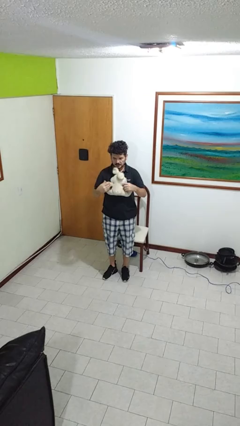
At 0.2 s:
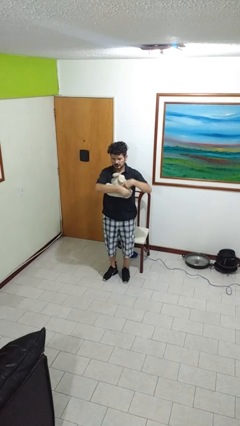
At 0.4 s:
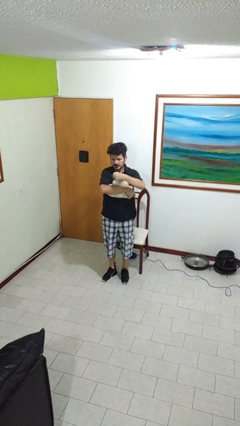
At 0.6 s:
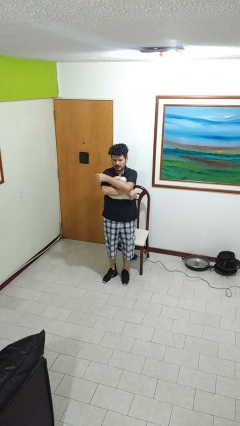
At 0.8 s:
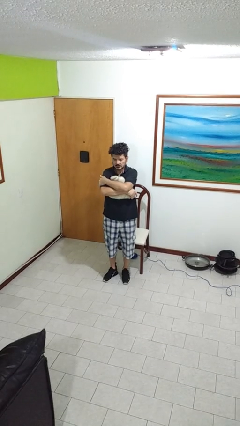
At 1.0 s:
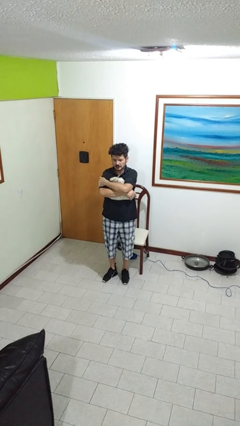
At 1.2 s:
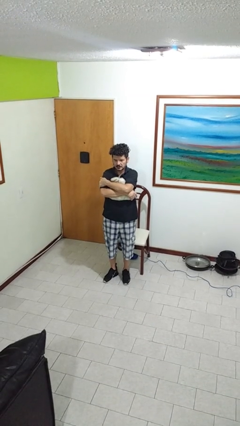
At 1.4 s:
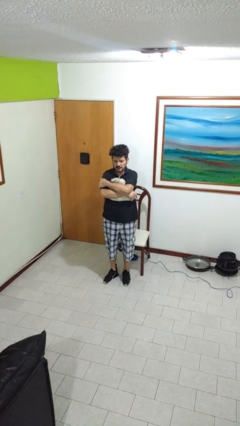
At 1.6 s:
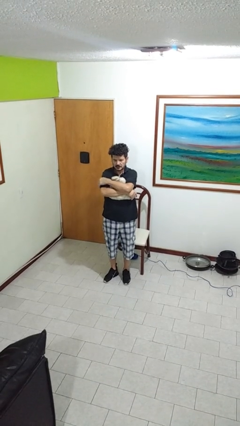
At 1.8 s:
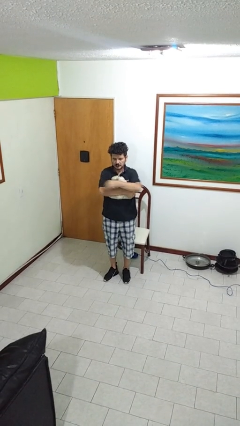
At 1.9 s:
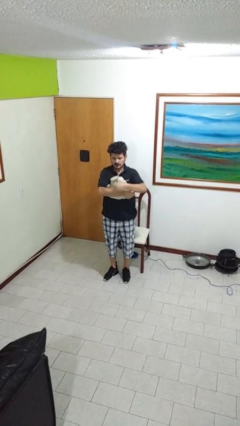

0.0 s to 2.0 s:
person hugs stuffed animal

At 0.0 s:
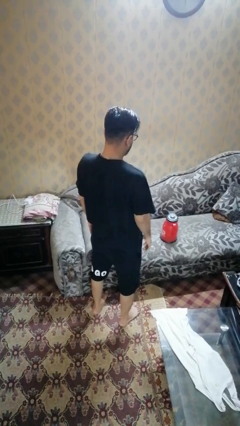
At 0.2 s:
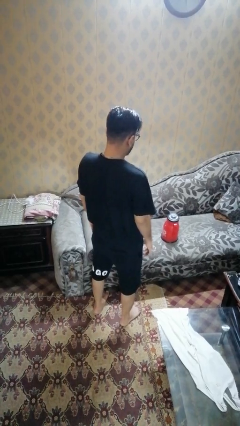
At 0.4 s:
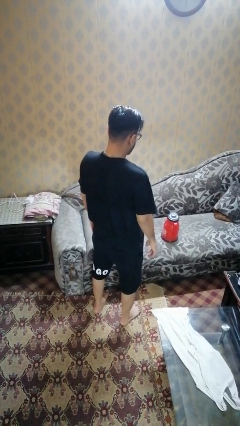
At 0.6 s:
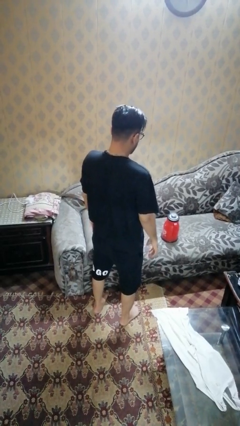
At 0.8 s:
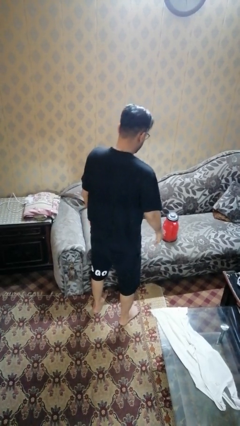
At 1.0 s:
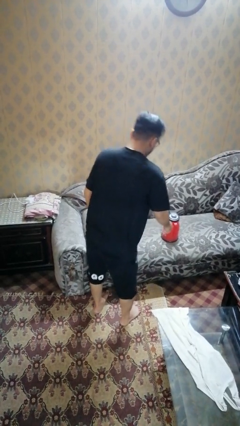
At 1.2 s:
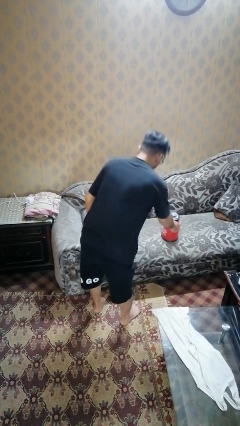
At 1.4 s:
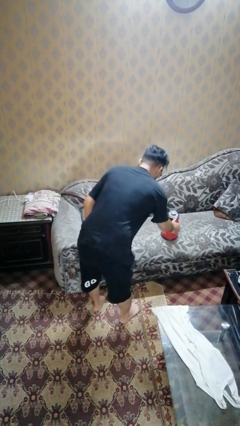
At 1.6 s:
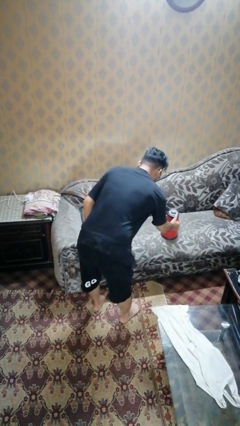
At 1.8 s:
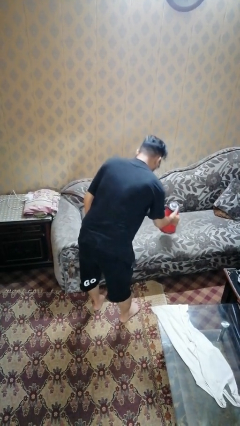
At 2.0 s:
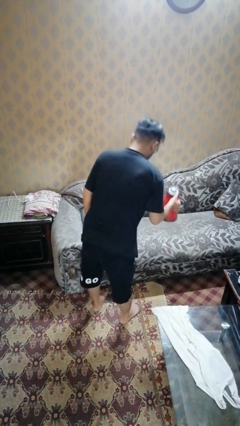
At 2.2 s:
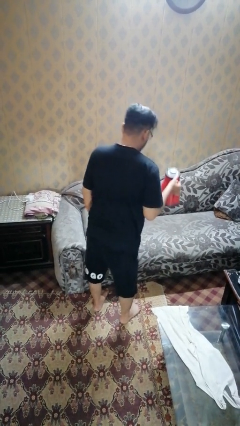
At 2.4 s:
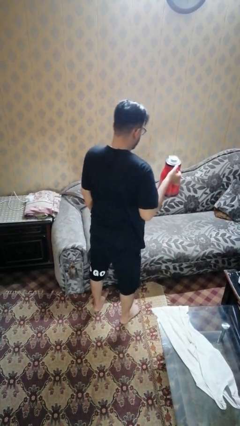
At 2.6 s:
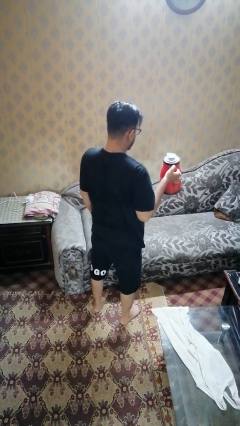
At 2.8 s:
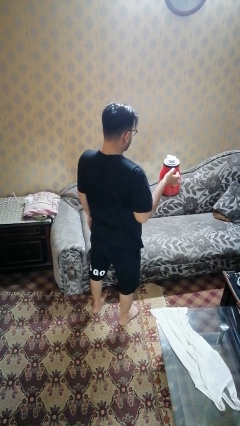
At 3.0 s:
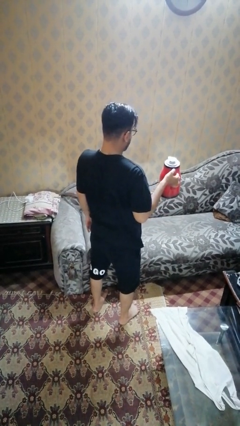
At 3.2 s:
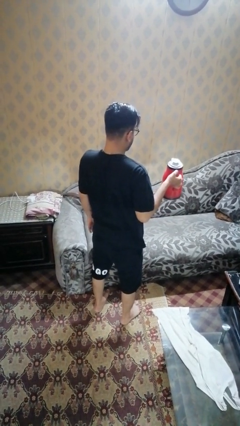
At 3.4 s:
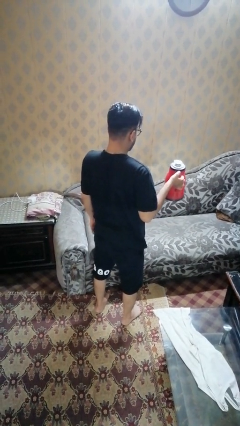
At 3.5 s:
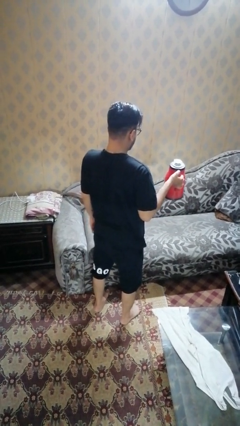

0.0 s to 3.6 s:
person picks up object from couch

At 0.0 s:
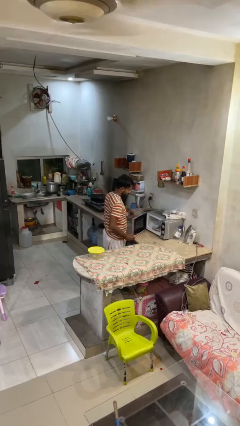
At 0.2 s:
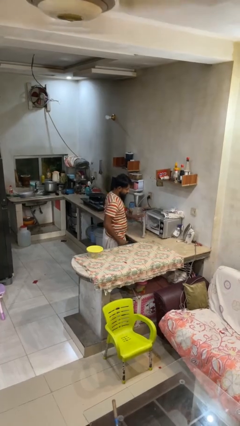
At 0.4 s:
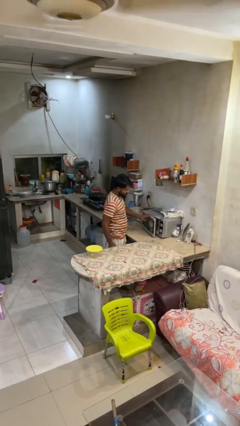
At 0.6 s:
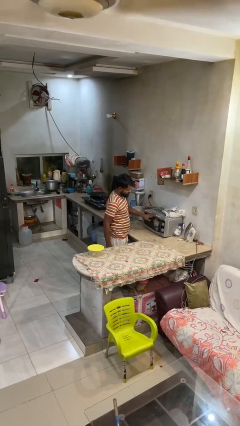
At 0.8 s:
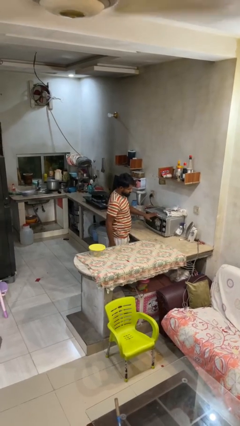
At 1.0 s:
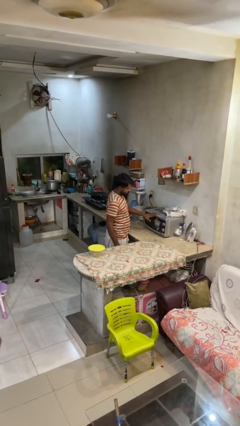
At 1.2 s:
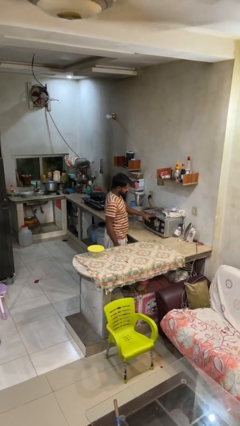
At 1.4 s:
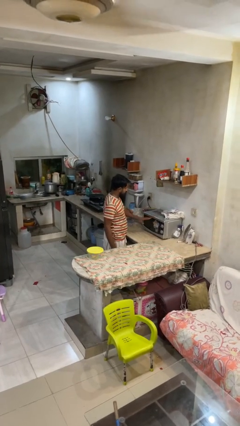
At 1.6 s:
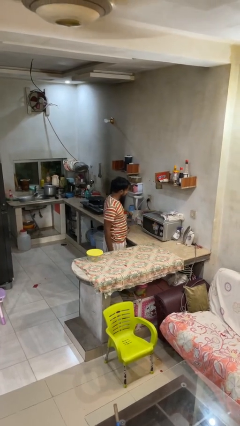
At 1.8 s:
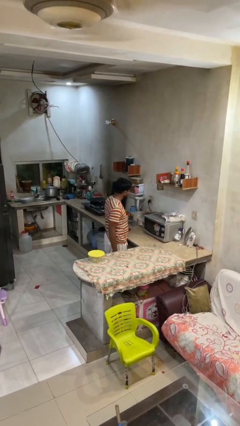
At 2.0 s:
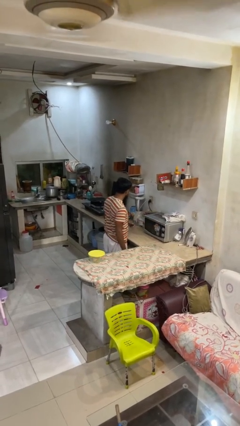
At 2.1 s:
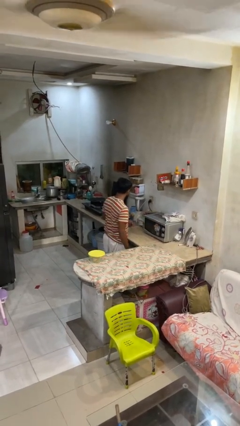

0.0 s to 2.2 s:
person closes microwave

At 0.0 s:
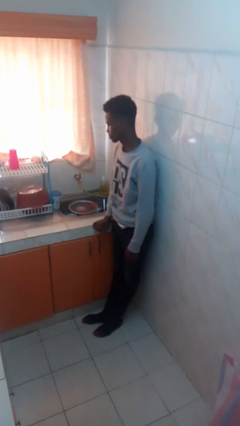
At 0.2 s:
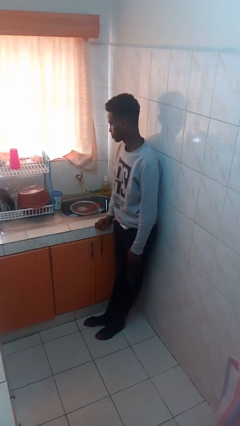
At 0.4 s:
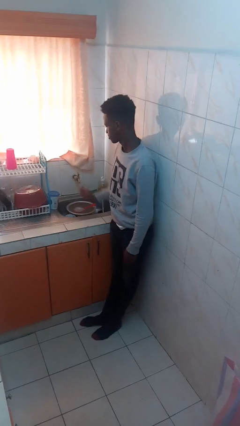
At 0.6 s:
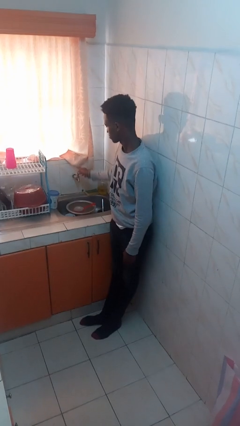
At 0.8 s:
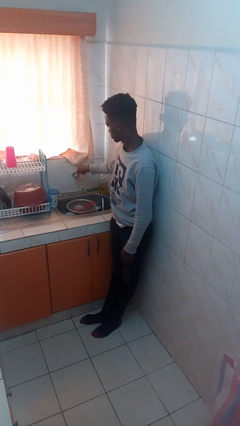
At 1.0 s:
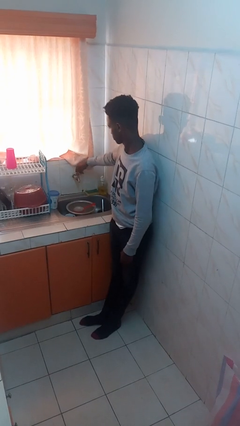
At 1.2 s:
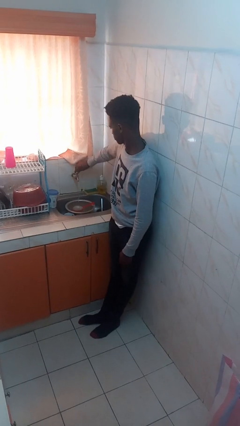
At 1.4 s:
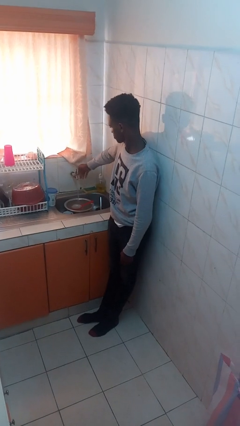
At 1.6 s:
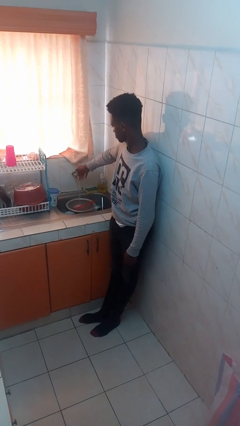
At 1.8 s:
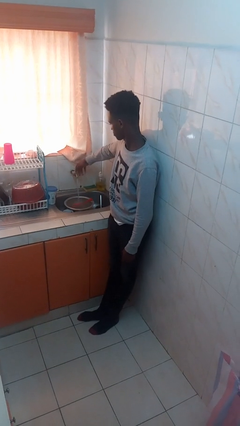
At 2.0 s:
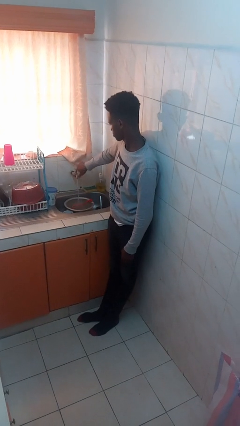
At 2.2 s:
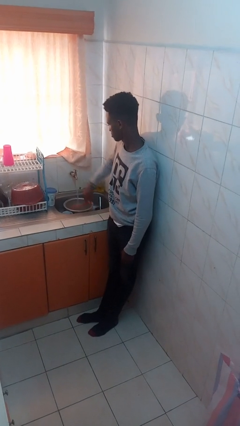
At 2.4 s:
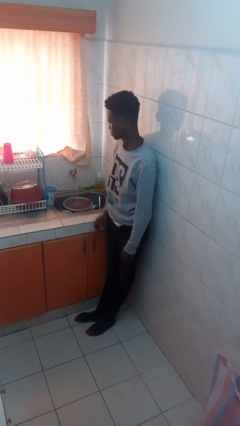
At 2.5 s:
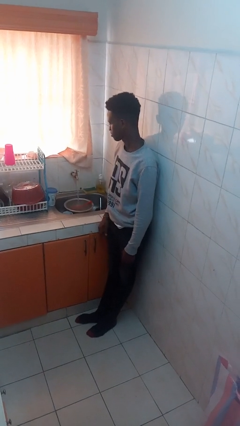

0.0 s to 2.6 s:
person turns on faucet

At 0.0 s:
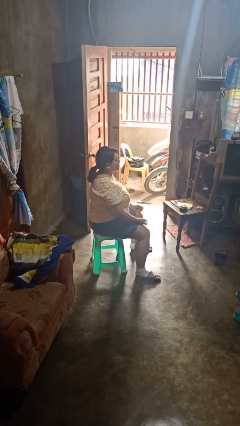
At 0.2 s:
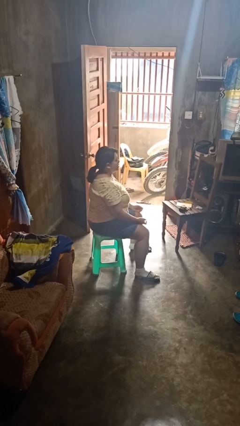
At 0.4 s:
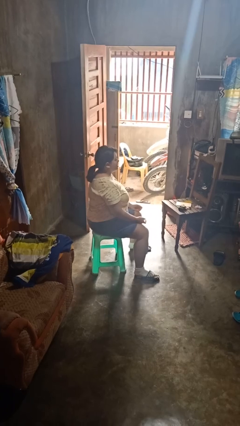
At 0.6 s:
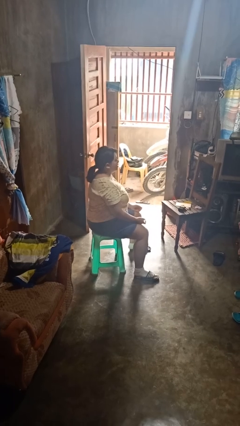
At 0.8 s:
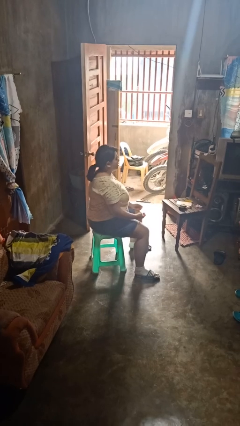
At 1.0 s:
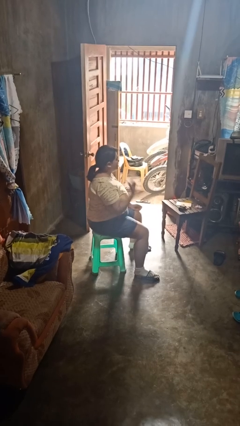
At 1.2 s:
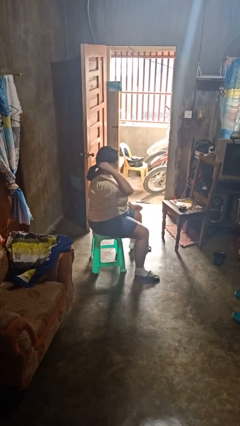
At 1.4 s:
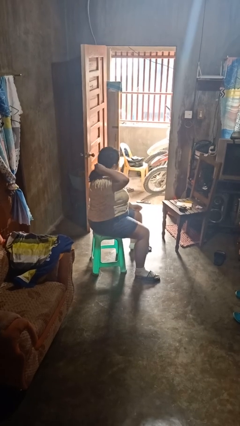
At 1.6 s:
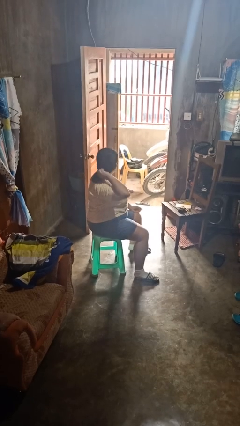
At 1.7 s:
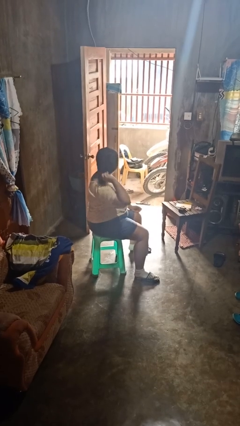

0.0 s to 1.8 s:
person takes off hairtie

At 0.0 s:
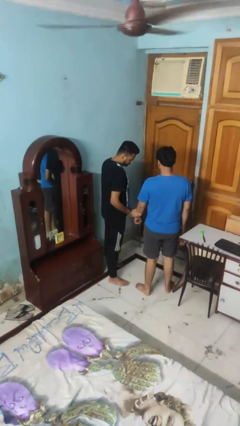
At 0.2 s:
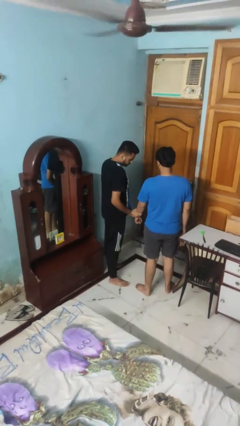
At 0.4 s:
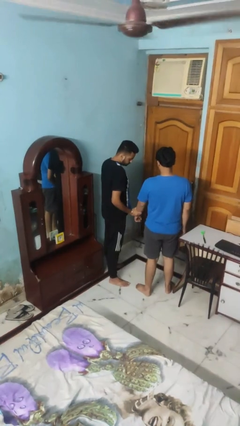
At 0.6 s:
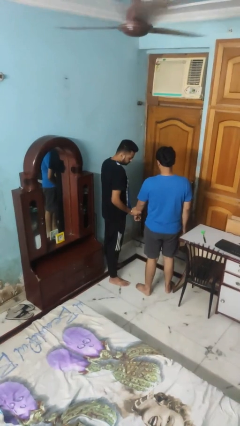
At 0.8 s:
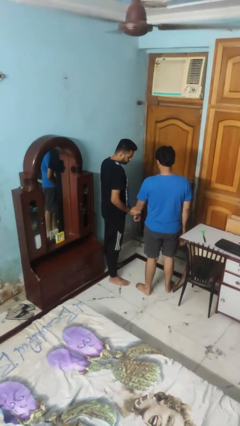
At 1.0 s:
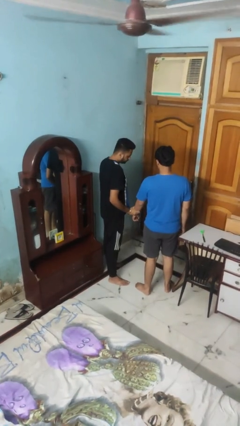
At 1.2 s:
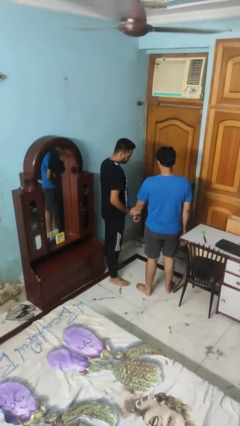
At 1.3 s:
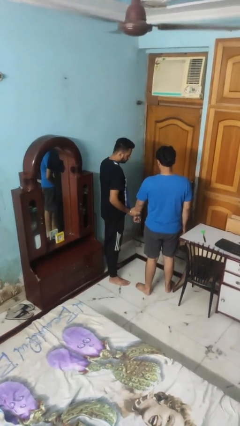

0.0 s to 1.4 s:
person grabs person by forearm

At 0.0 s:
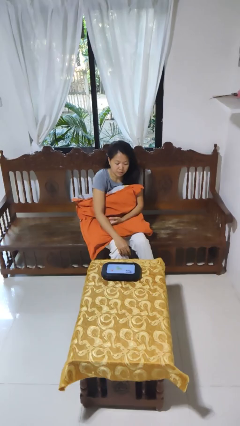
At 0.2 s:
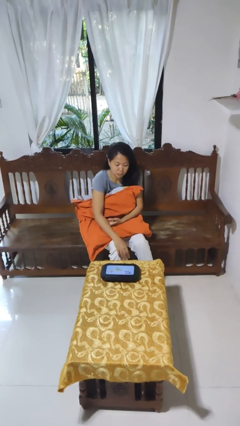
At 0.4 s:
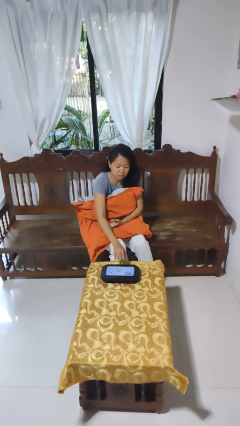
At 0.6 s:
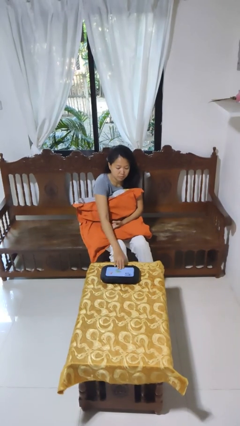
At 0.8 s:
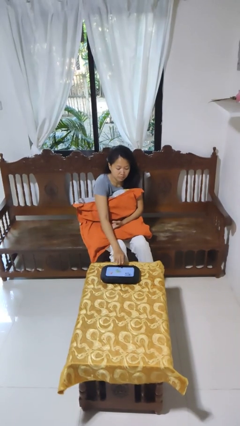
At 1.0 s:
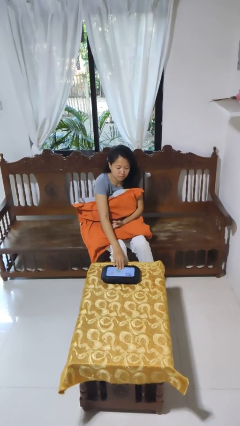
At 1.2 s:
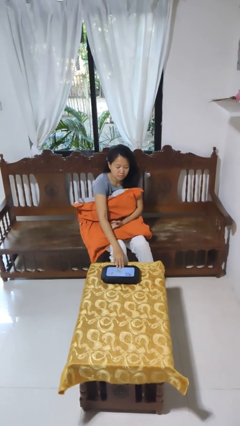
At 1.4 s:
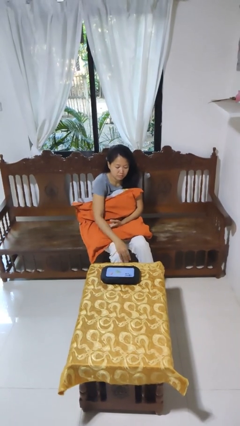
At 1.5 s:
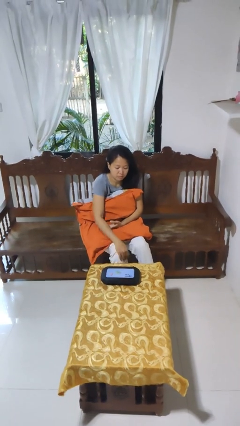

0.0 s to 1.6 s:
person taps object with finger

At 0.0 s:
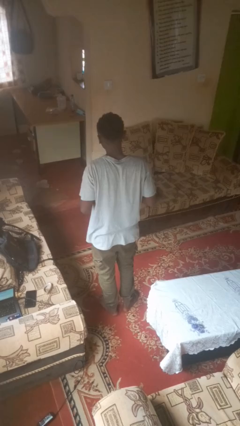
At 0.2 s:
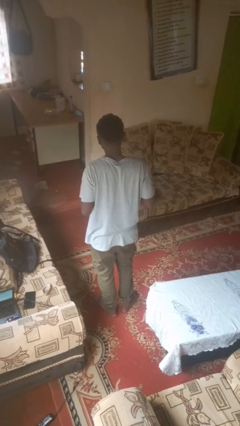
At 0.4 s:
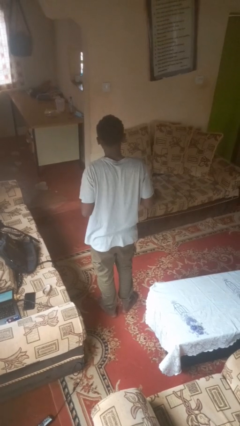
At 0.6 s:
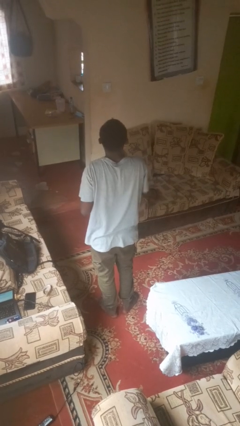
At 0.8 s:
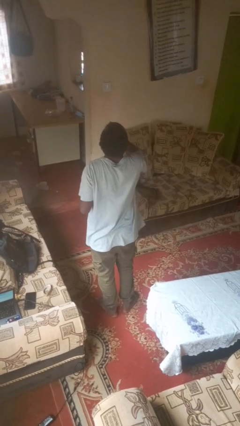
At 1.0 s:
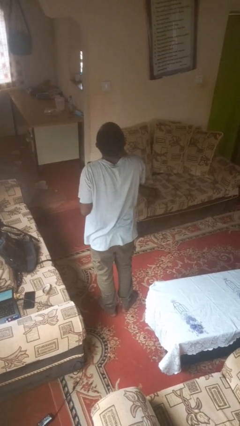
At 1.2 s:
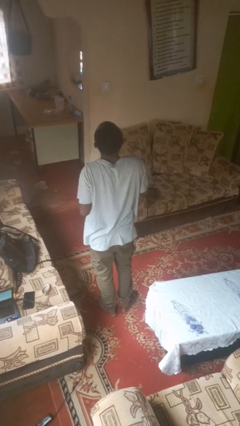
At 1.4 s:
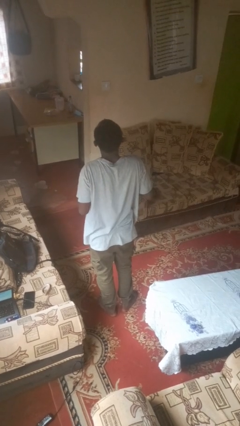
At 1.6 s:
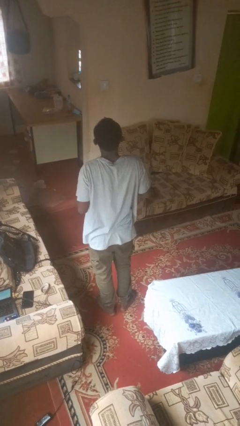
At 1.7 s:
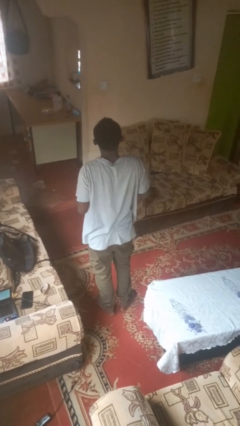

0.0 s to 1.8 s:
person takes medicine pills
